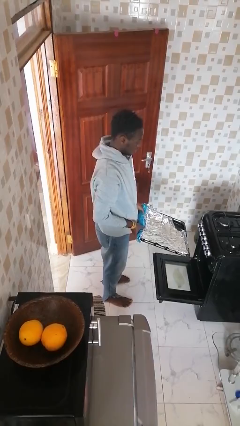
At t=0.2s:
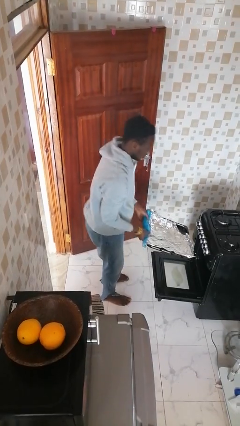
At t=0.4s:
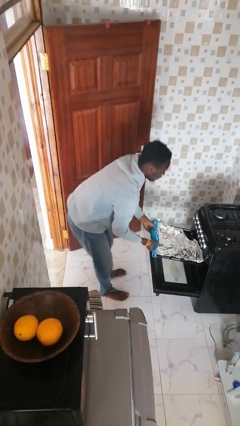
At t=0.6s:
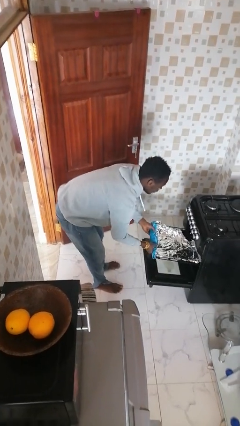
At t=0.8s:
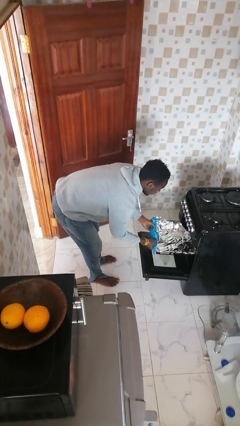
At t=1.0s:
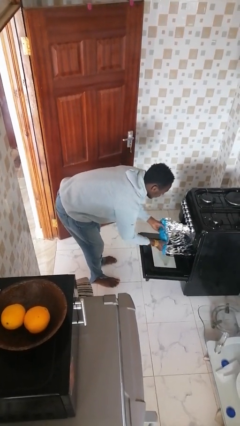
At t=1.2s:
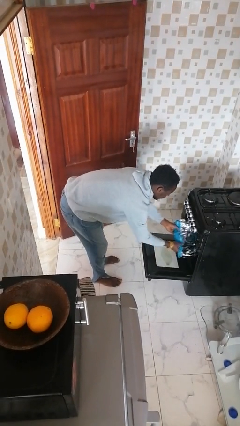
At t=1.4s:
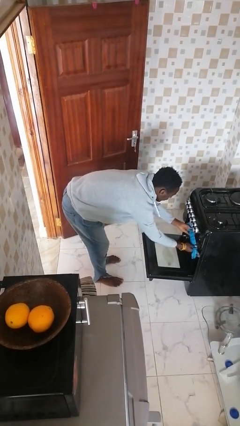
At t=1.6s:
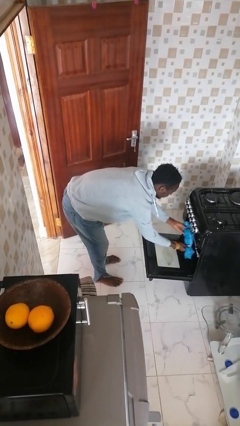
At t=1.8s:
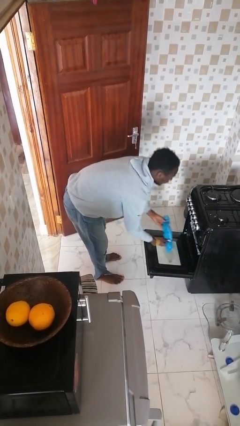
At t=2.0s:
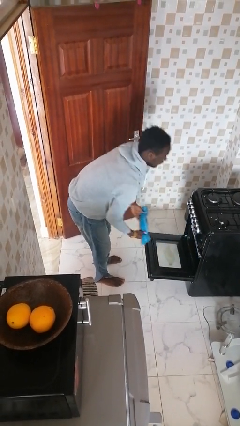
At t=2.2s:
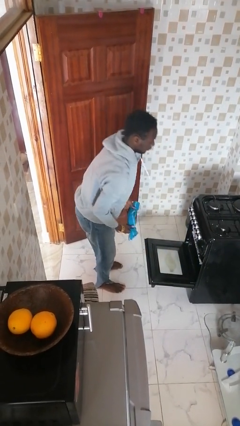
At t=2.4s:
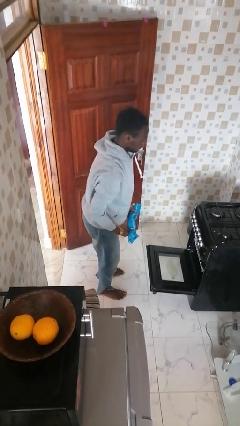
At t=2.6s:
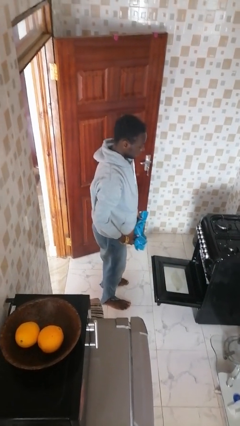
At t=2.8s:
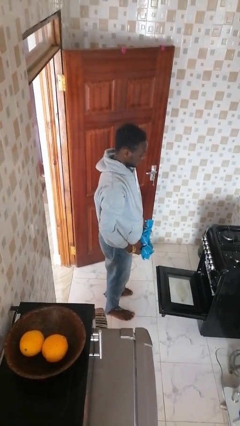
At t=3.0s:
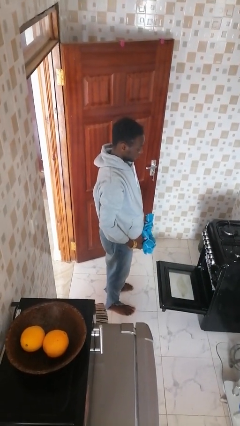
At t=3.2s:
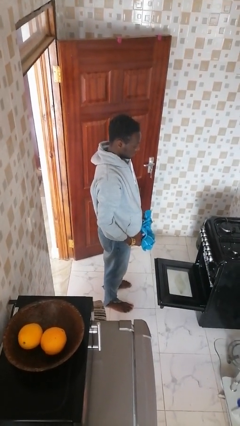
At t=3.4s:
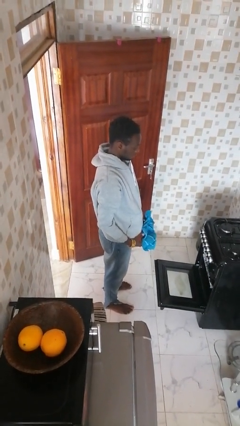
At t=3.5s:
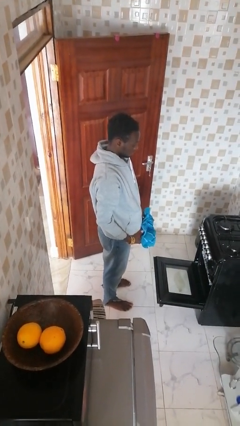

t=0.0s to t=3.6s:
person puts object into oven

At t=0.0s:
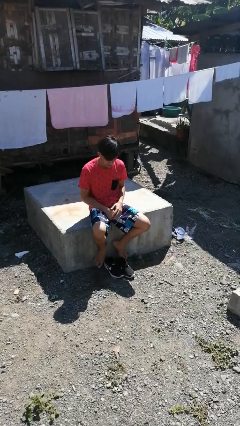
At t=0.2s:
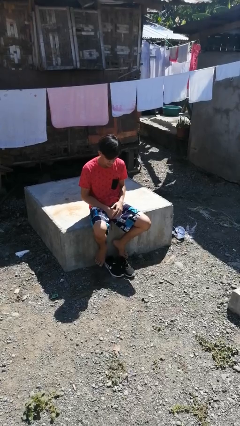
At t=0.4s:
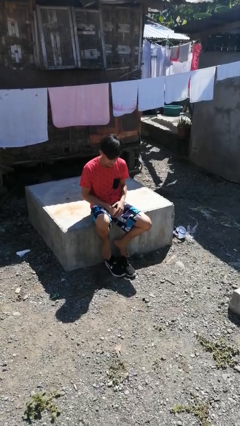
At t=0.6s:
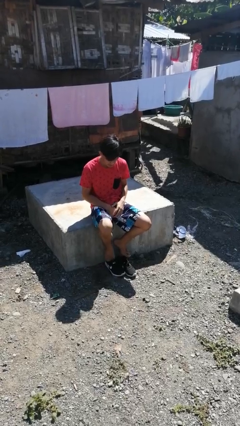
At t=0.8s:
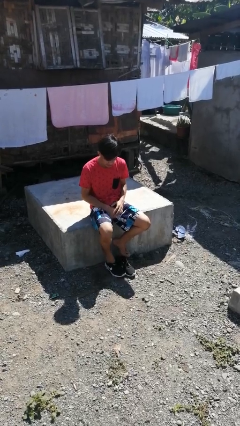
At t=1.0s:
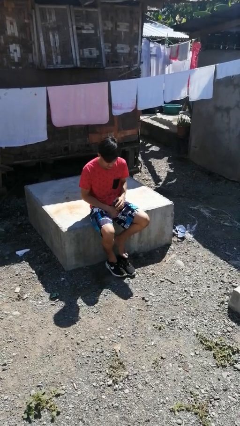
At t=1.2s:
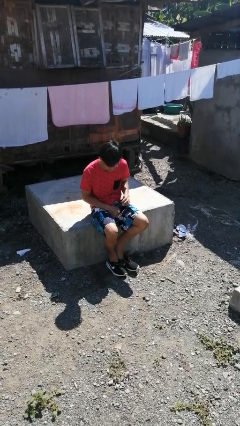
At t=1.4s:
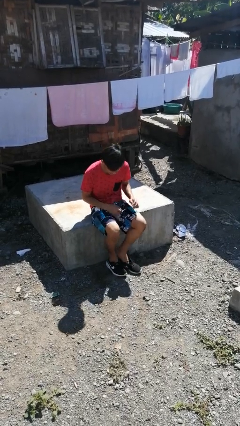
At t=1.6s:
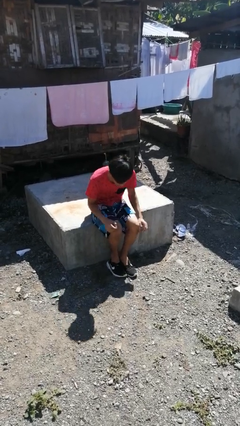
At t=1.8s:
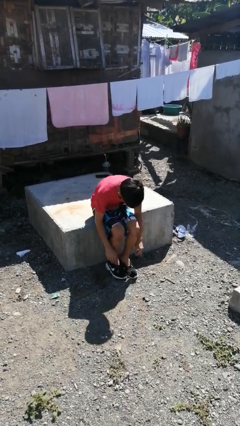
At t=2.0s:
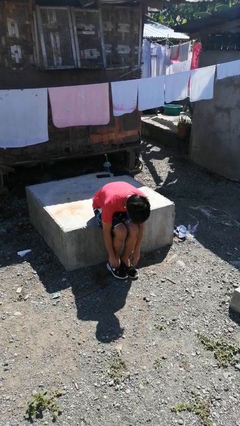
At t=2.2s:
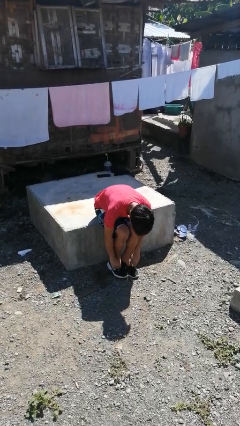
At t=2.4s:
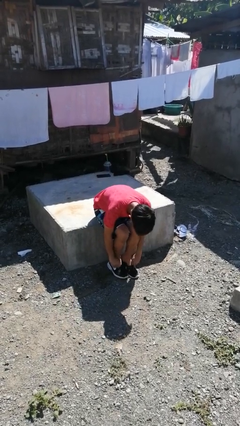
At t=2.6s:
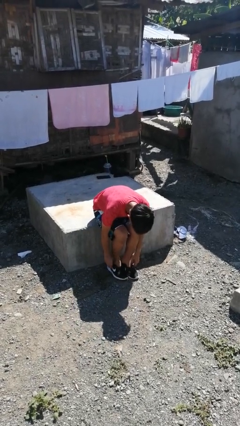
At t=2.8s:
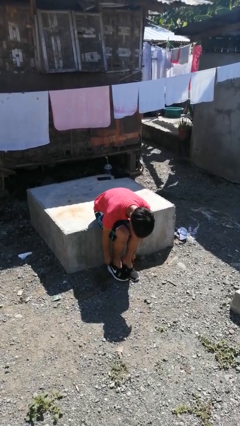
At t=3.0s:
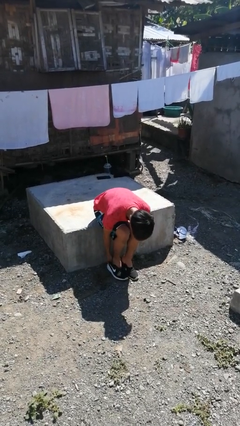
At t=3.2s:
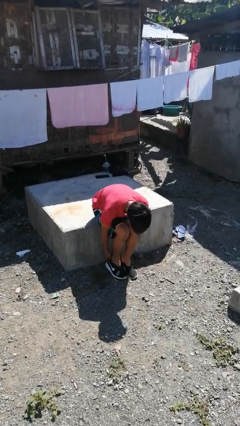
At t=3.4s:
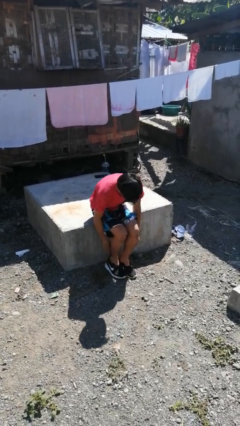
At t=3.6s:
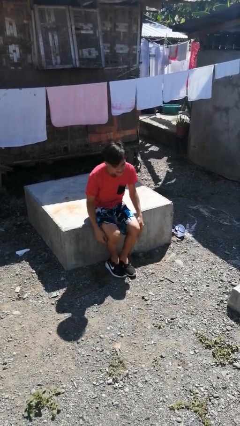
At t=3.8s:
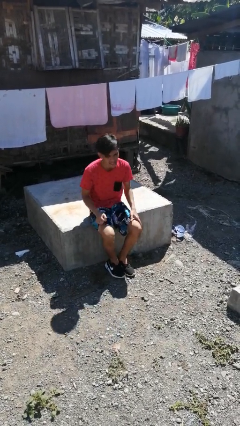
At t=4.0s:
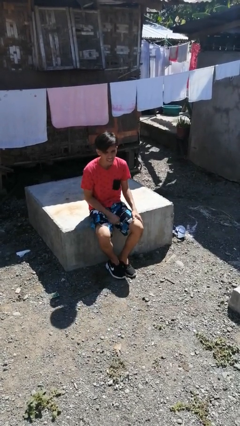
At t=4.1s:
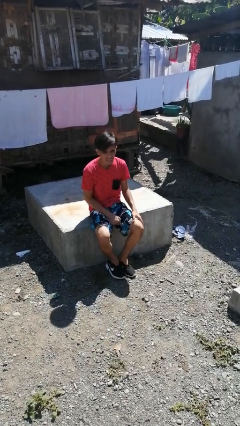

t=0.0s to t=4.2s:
person puts on shoes

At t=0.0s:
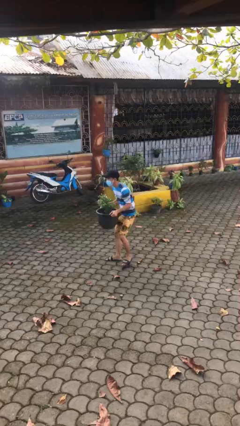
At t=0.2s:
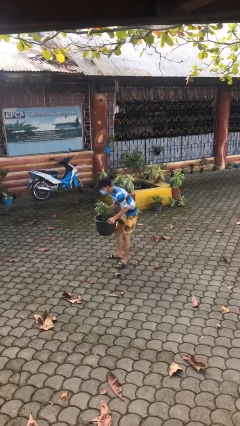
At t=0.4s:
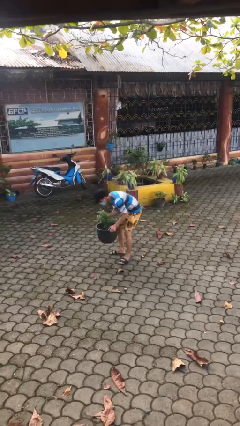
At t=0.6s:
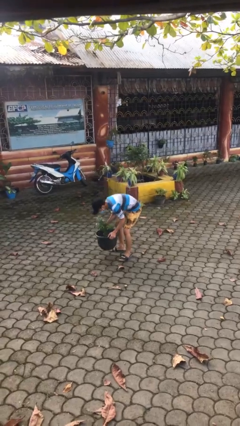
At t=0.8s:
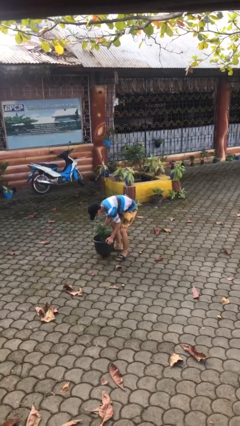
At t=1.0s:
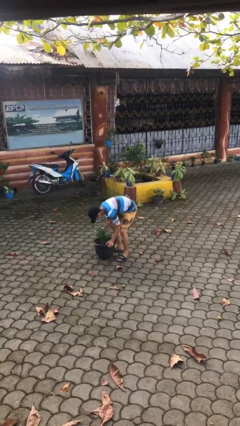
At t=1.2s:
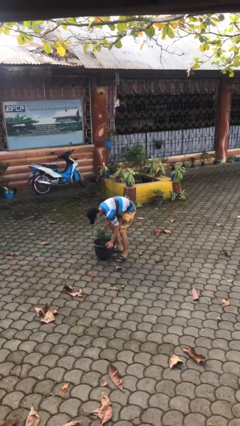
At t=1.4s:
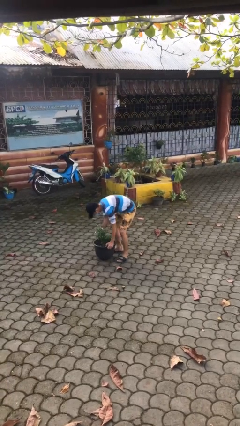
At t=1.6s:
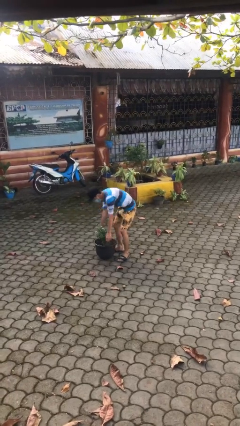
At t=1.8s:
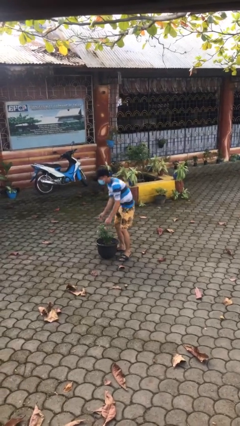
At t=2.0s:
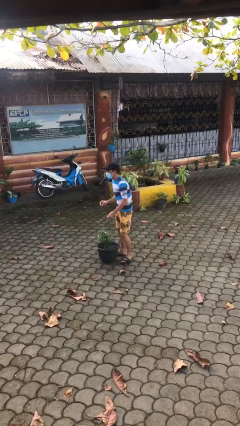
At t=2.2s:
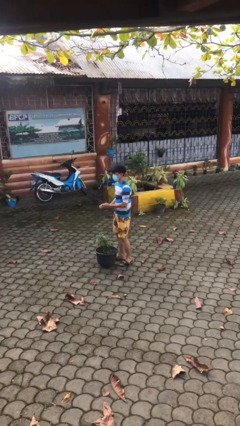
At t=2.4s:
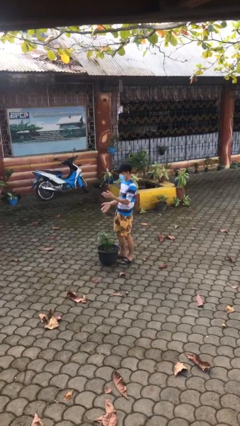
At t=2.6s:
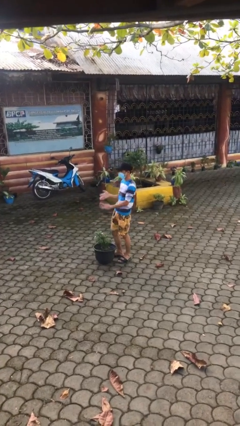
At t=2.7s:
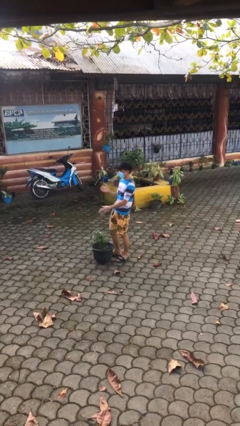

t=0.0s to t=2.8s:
person puts down object on floor

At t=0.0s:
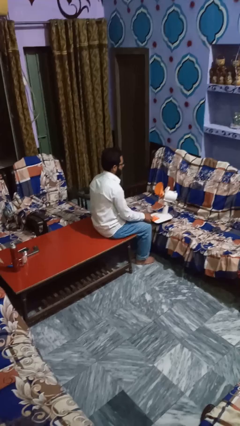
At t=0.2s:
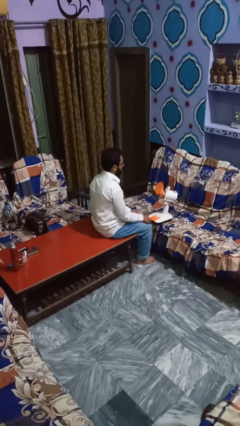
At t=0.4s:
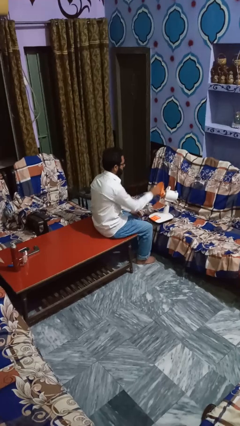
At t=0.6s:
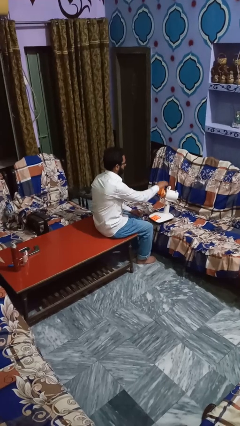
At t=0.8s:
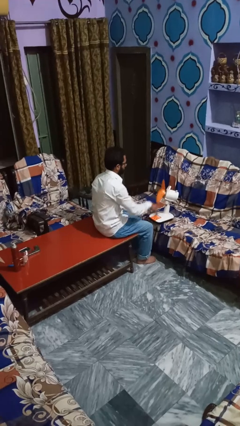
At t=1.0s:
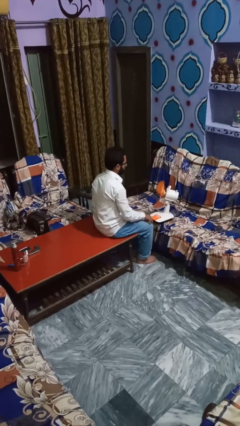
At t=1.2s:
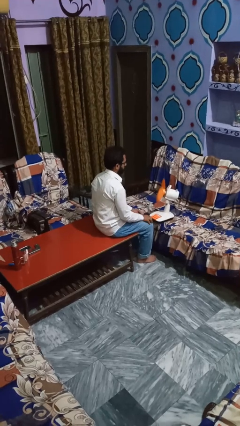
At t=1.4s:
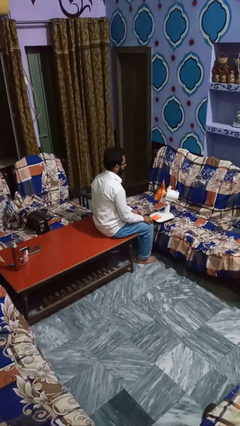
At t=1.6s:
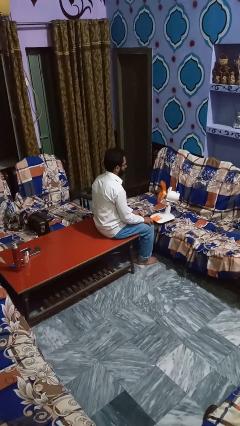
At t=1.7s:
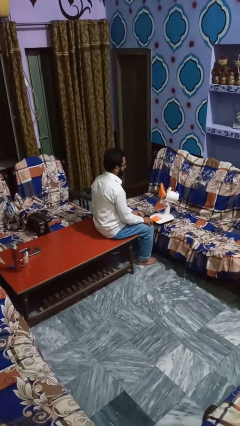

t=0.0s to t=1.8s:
person turns on fan

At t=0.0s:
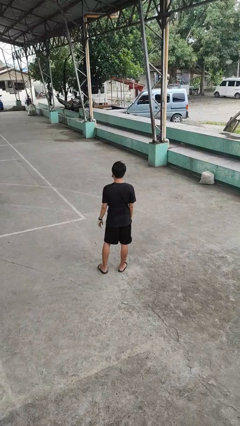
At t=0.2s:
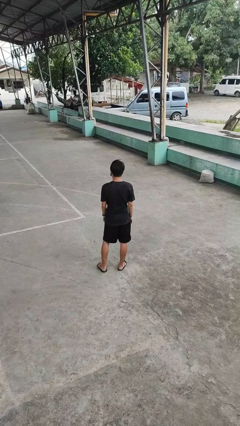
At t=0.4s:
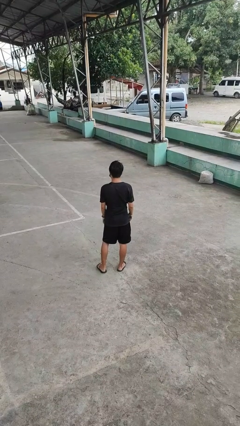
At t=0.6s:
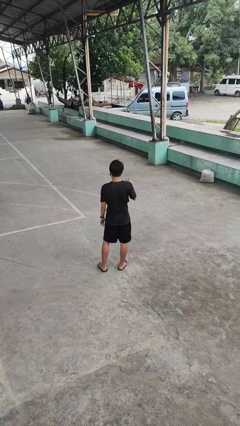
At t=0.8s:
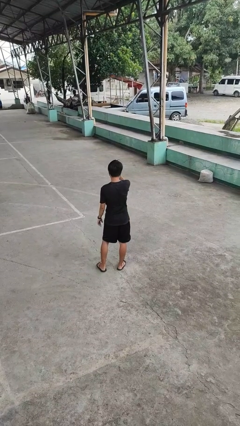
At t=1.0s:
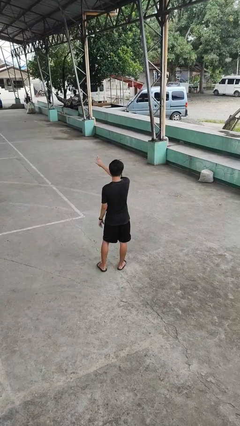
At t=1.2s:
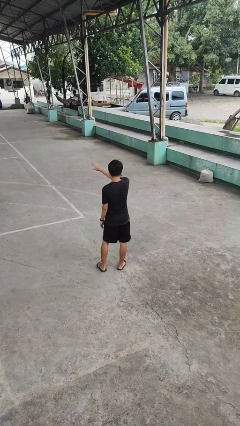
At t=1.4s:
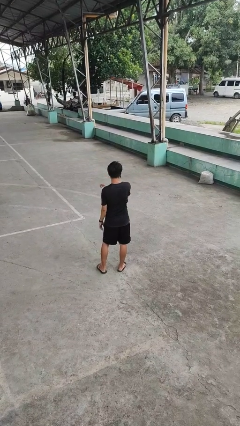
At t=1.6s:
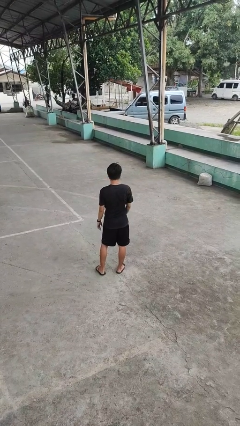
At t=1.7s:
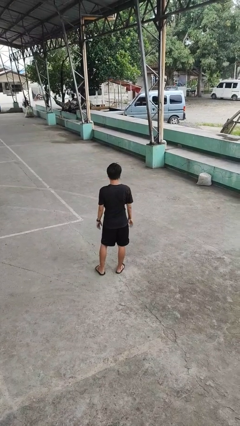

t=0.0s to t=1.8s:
person gestures swipe left

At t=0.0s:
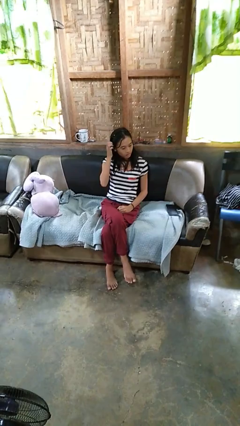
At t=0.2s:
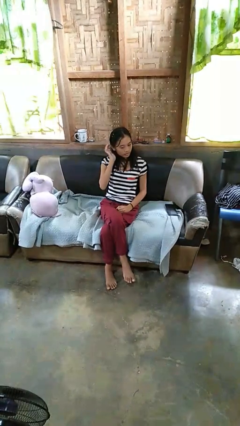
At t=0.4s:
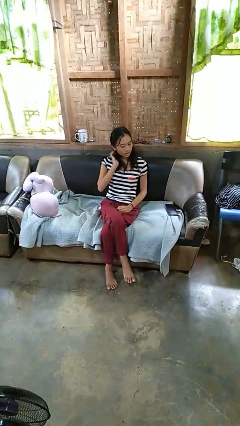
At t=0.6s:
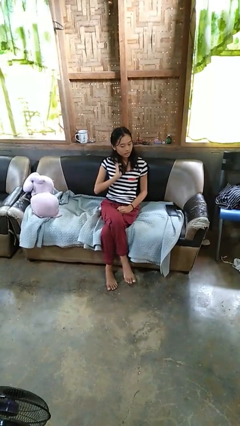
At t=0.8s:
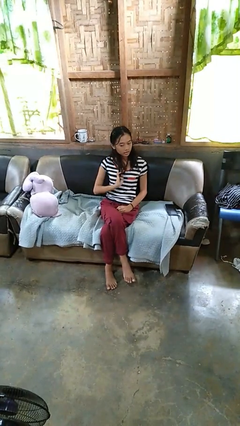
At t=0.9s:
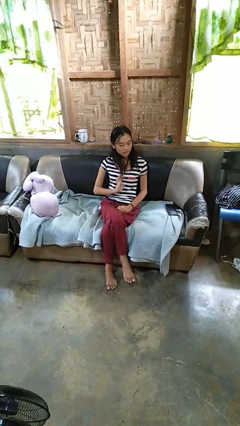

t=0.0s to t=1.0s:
person strokes hair

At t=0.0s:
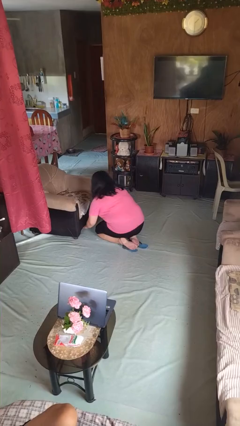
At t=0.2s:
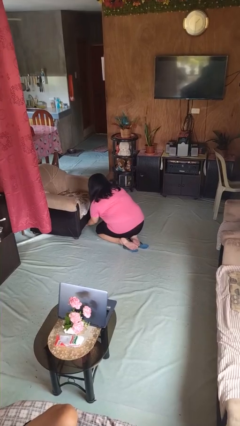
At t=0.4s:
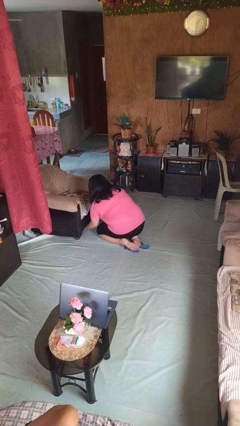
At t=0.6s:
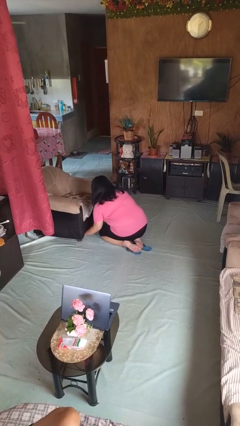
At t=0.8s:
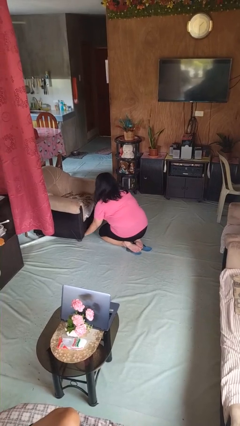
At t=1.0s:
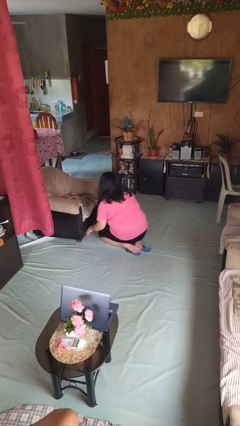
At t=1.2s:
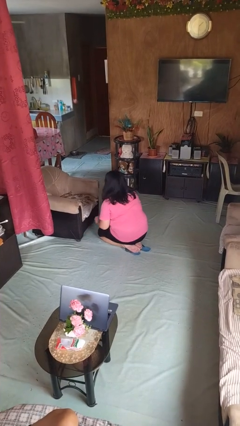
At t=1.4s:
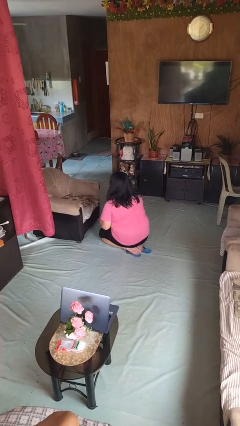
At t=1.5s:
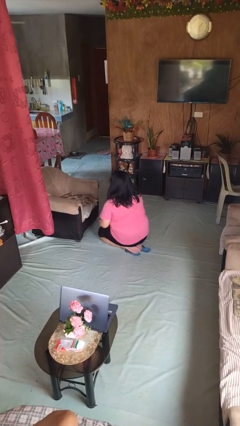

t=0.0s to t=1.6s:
person searches under couch

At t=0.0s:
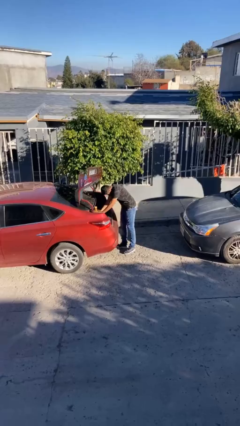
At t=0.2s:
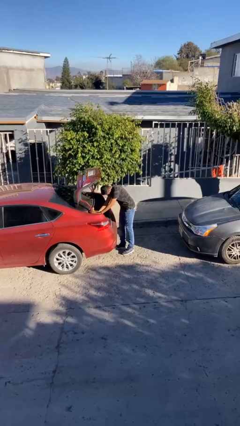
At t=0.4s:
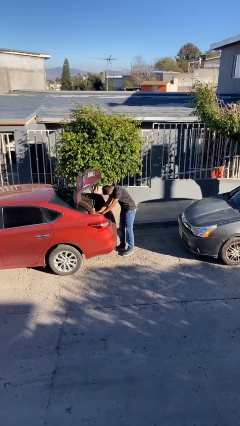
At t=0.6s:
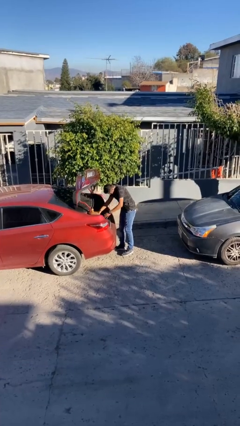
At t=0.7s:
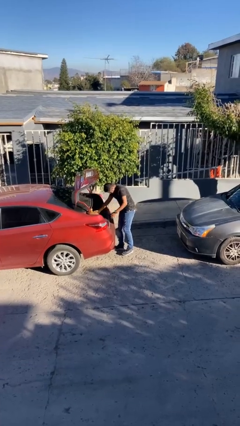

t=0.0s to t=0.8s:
person loads car
